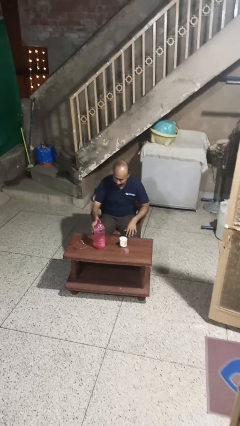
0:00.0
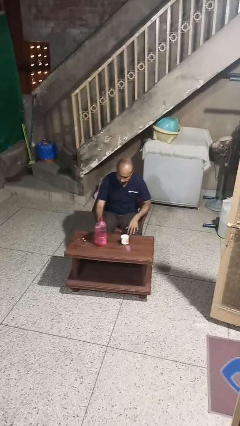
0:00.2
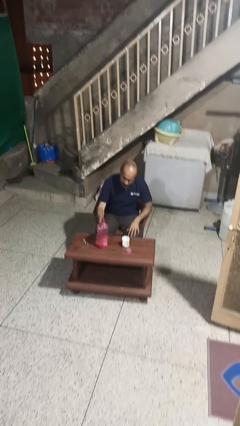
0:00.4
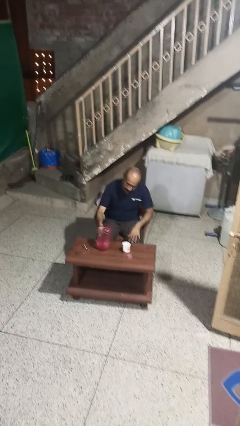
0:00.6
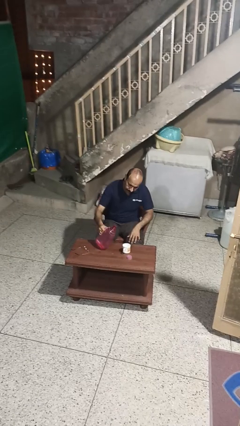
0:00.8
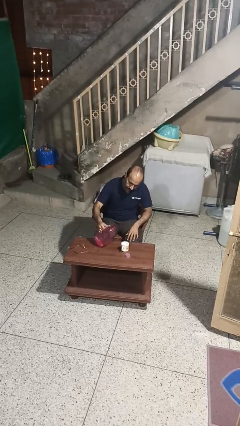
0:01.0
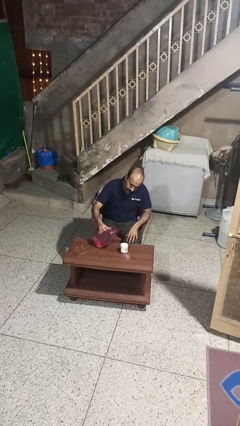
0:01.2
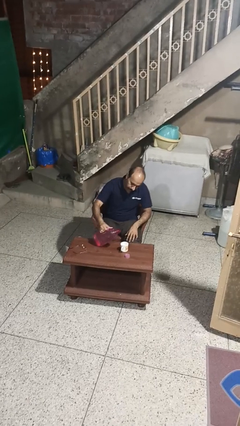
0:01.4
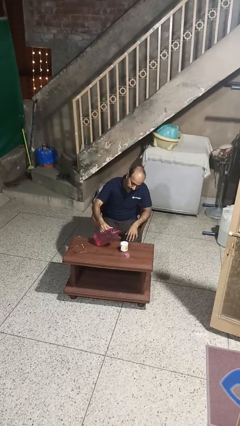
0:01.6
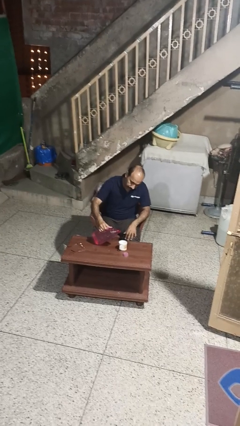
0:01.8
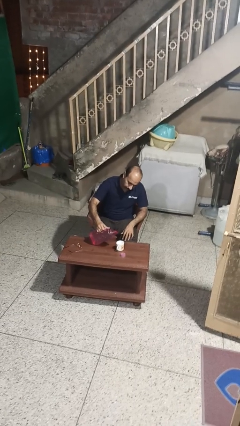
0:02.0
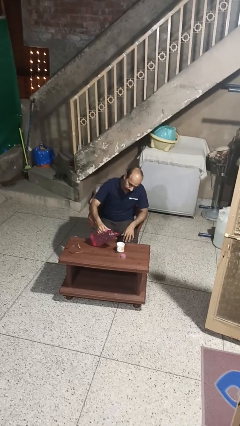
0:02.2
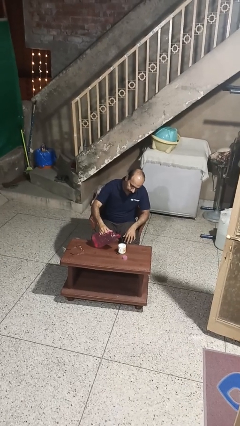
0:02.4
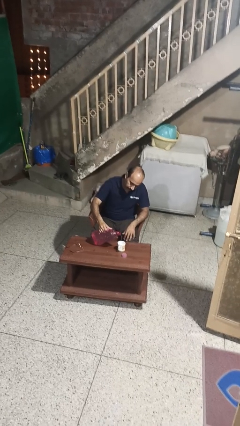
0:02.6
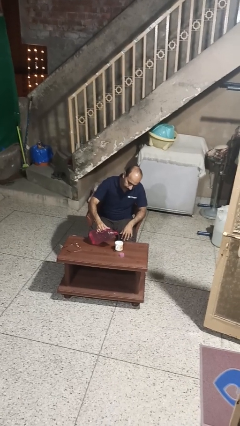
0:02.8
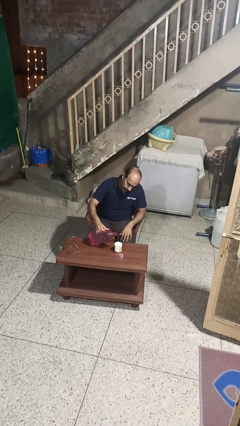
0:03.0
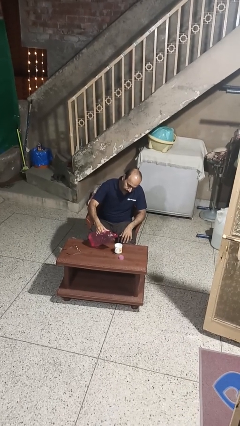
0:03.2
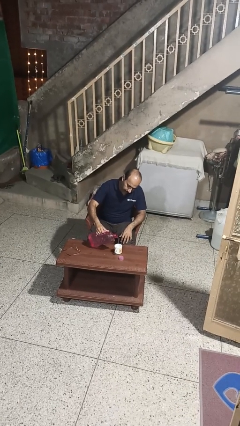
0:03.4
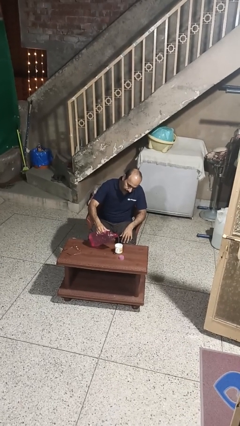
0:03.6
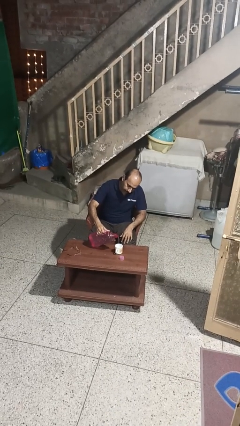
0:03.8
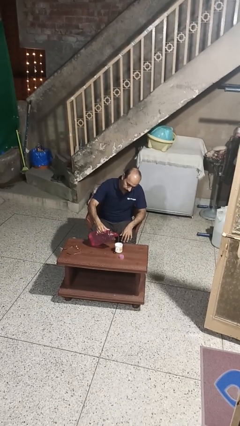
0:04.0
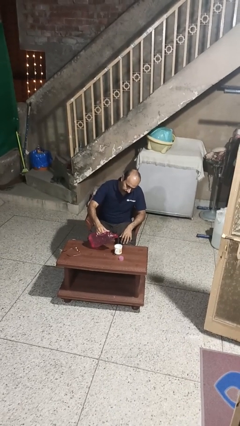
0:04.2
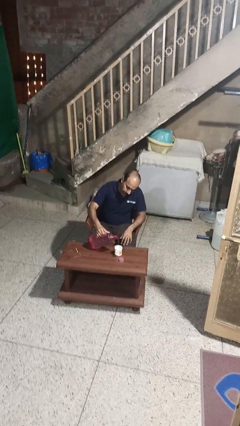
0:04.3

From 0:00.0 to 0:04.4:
person pours liquid into cup

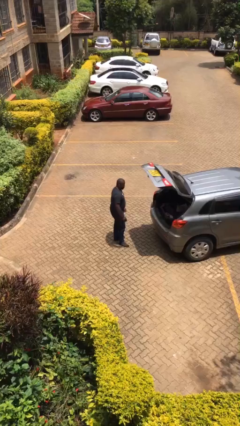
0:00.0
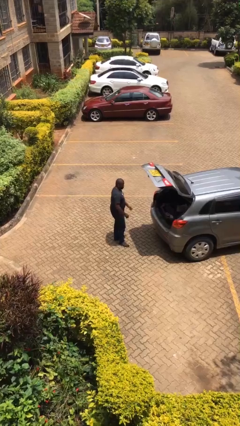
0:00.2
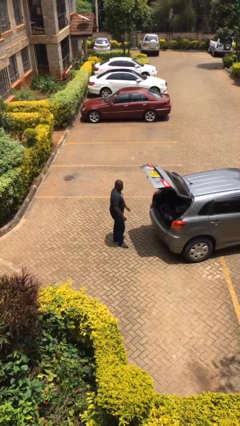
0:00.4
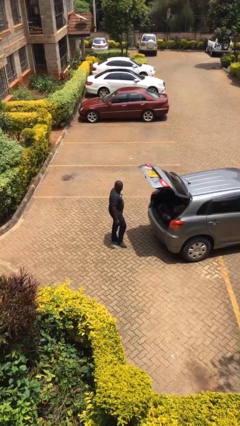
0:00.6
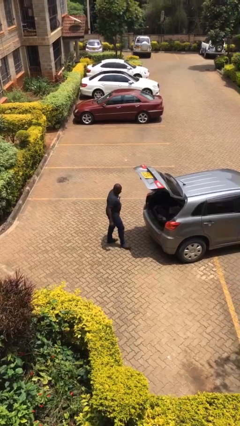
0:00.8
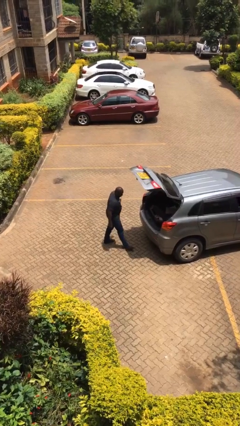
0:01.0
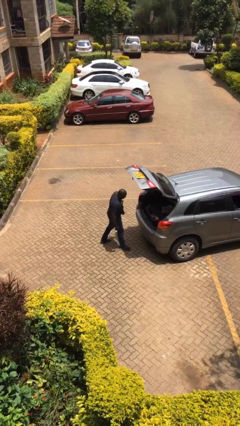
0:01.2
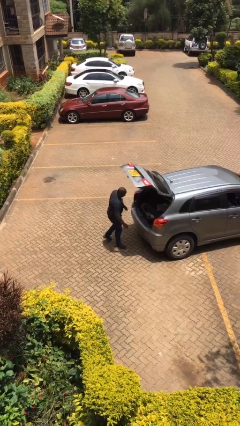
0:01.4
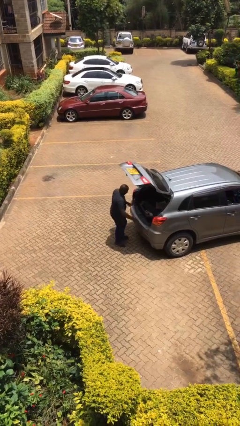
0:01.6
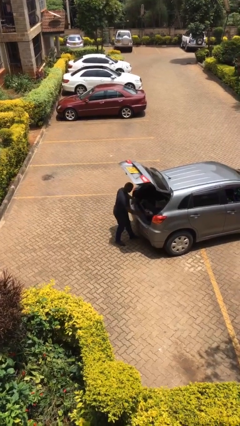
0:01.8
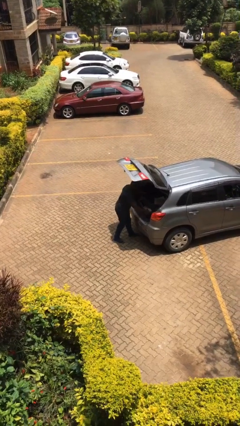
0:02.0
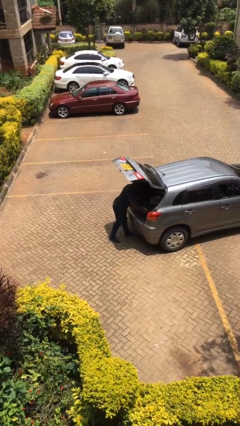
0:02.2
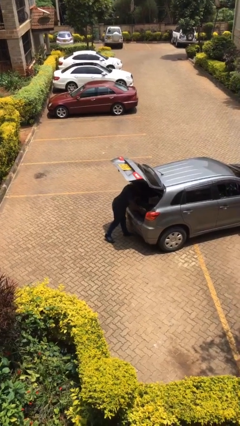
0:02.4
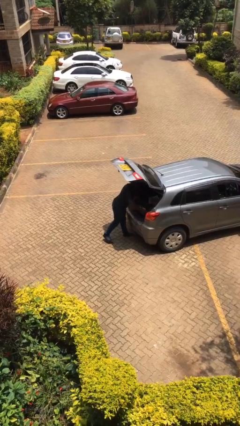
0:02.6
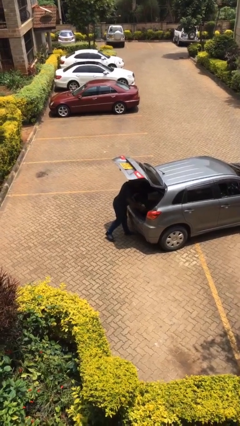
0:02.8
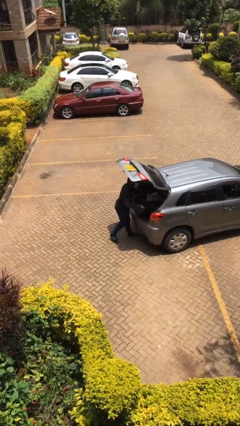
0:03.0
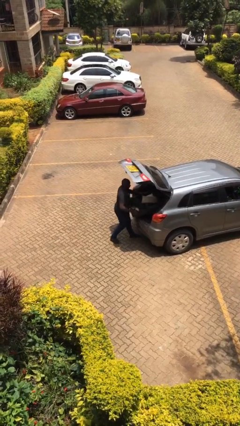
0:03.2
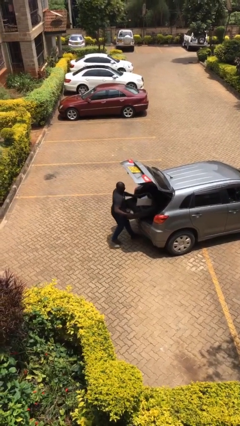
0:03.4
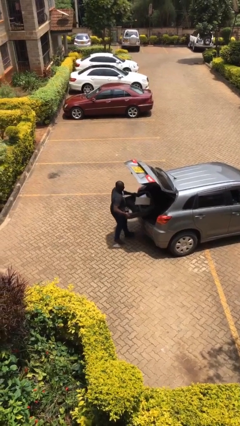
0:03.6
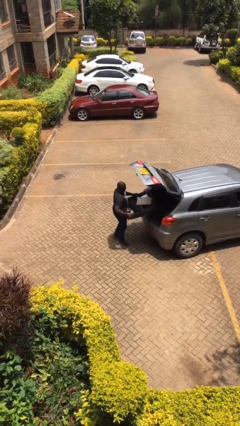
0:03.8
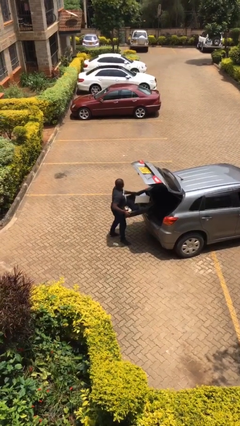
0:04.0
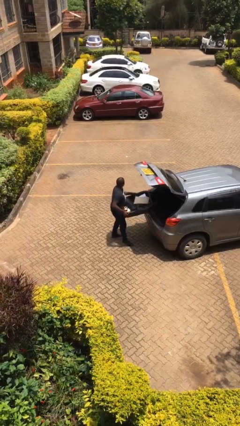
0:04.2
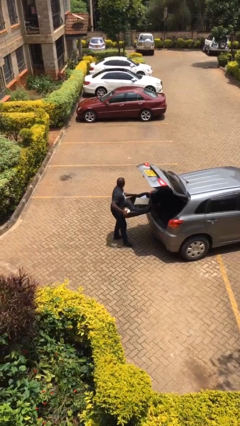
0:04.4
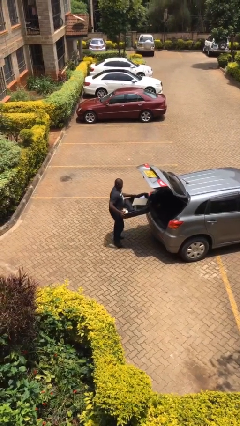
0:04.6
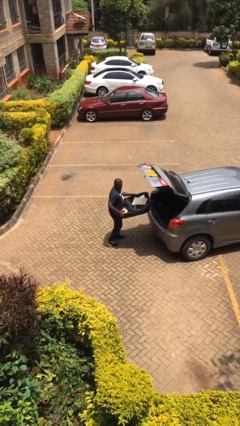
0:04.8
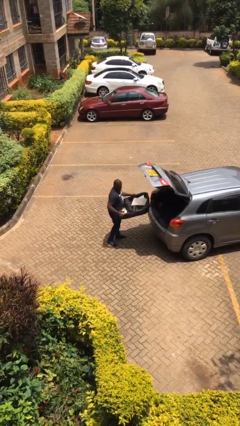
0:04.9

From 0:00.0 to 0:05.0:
person unloads car

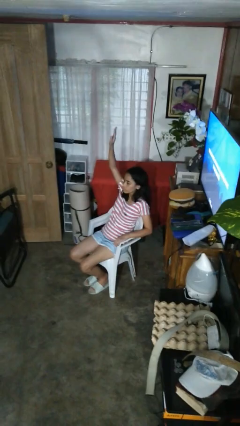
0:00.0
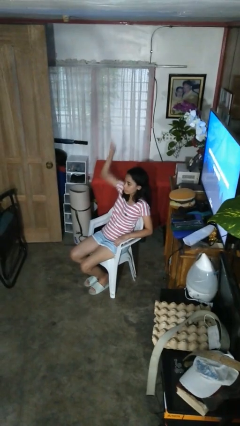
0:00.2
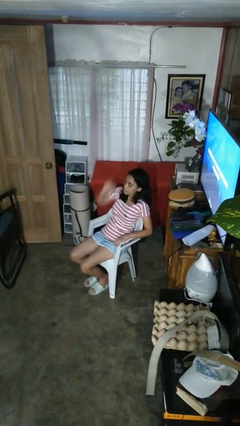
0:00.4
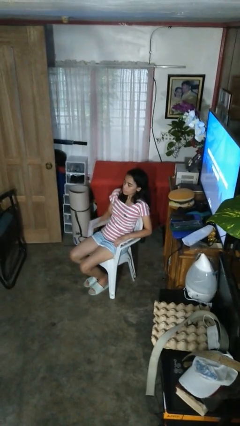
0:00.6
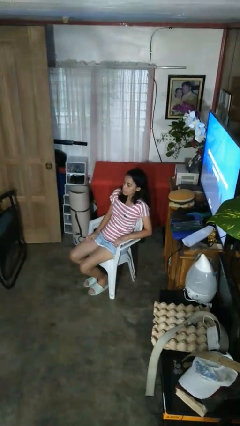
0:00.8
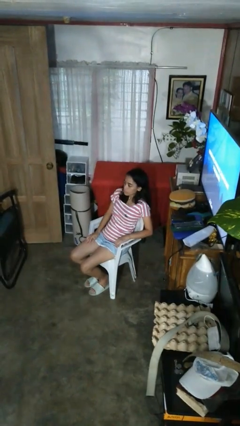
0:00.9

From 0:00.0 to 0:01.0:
person gestures lower hand

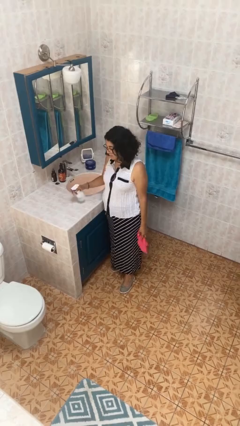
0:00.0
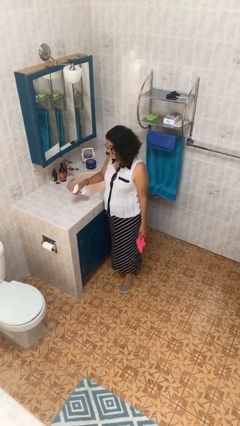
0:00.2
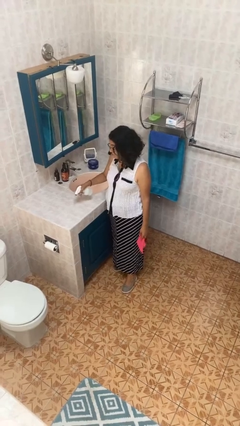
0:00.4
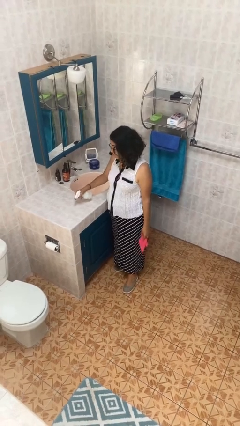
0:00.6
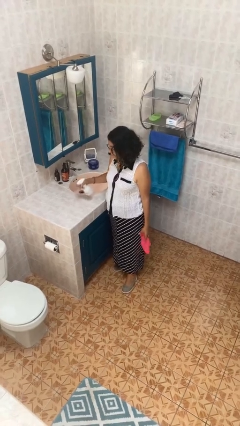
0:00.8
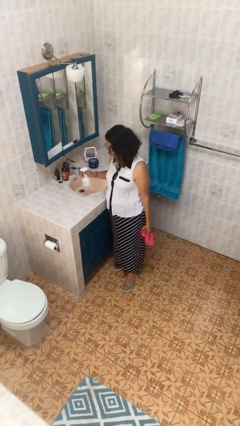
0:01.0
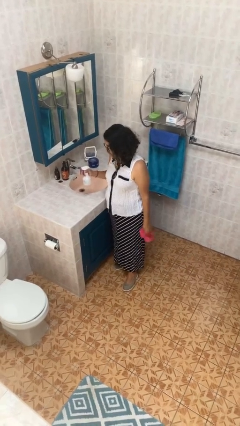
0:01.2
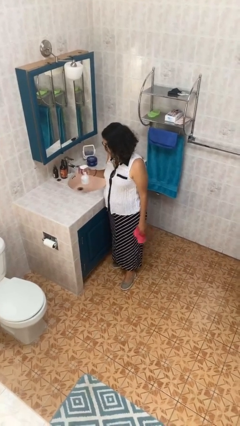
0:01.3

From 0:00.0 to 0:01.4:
person sprays from bottle

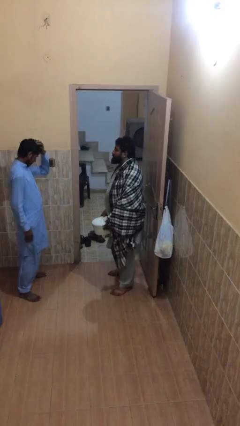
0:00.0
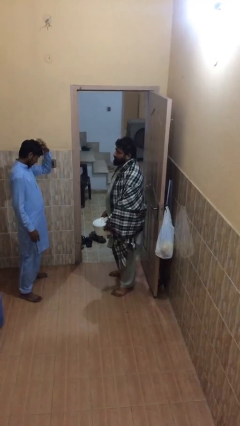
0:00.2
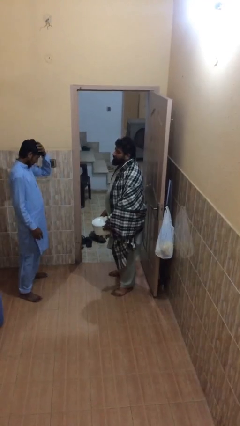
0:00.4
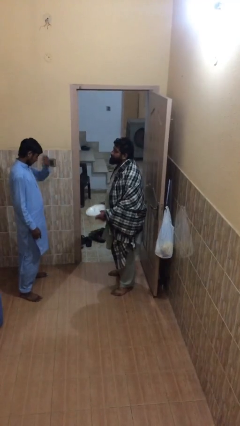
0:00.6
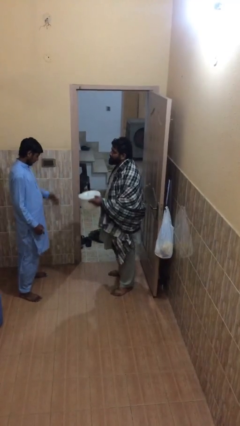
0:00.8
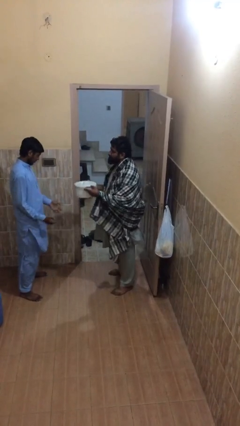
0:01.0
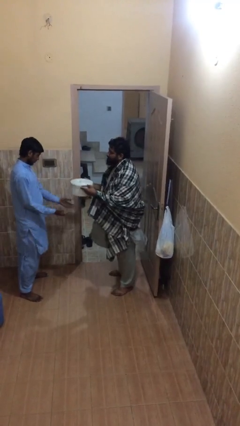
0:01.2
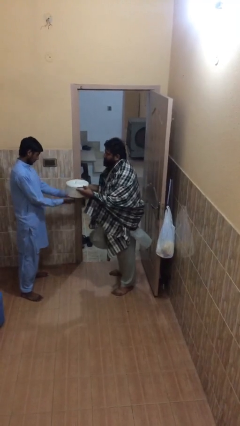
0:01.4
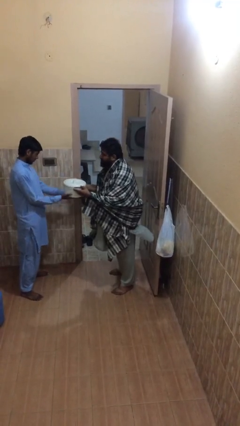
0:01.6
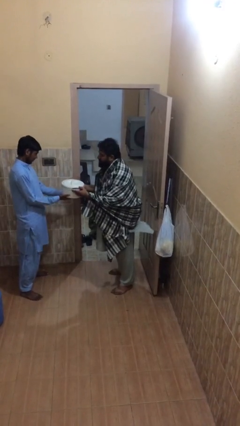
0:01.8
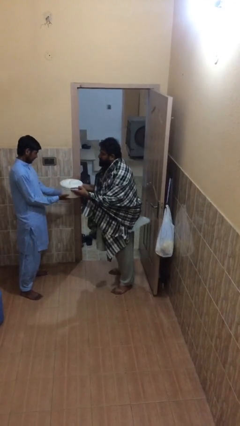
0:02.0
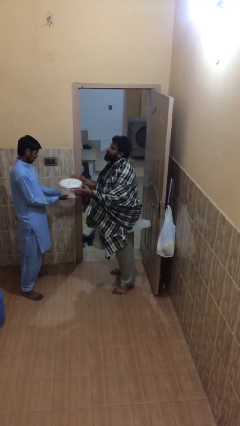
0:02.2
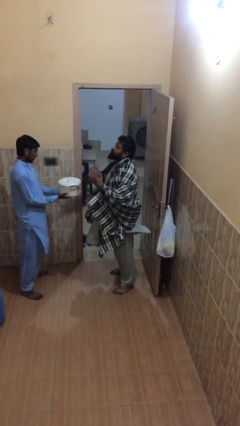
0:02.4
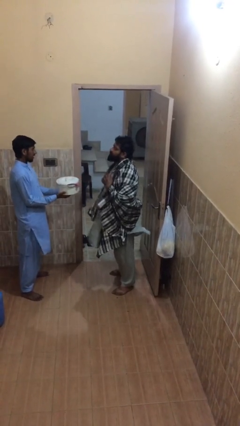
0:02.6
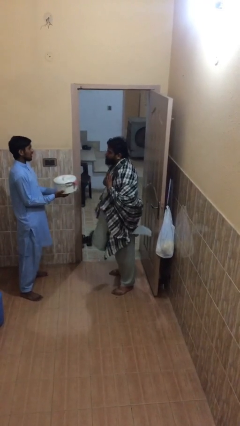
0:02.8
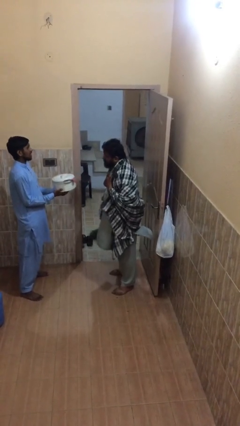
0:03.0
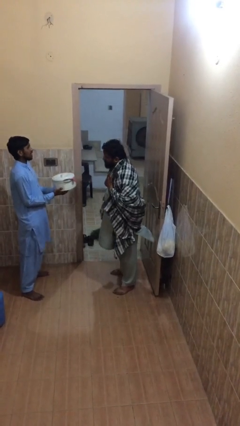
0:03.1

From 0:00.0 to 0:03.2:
person transfers object to person

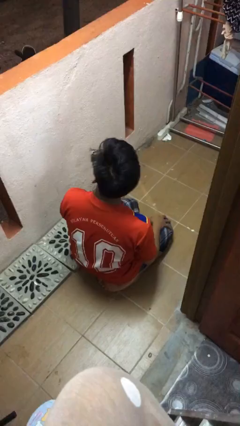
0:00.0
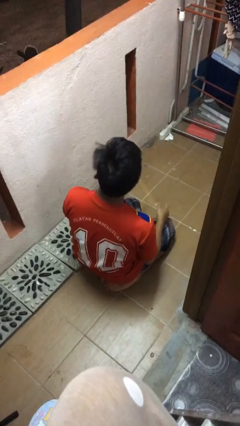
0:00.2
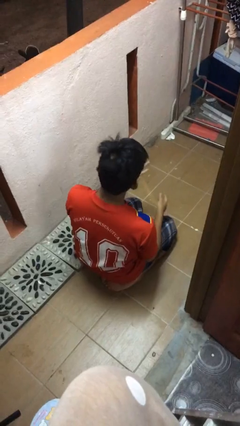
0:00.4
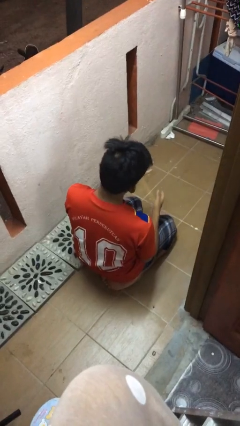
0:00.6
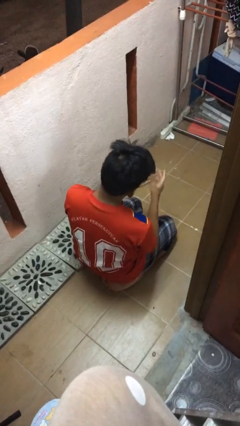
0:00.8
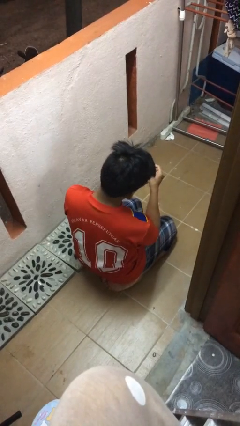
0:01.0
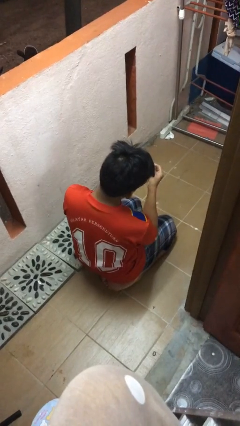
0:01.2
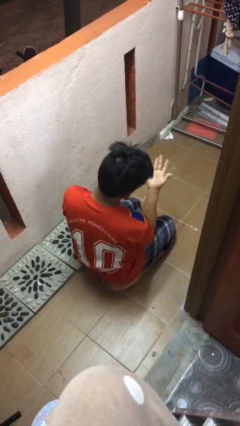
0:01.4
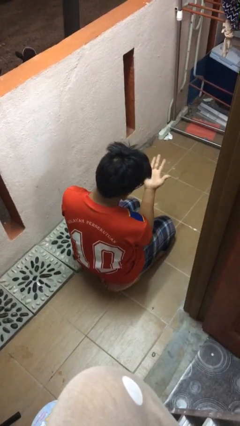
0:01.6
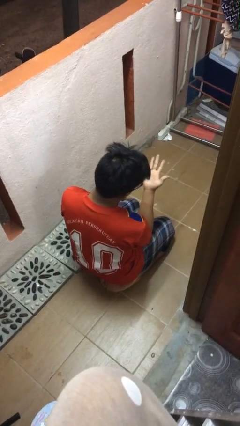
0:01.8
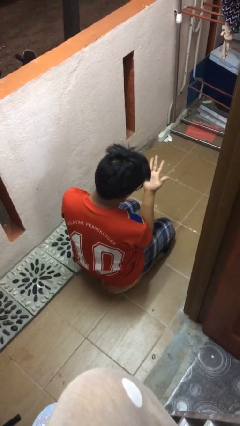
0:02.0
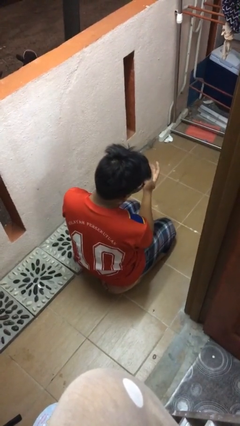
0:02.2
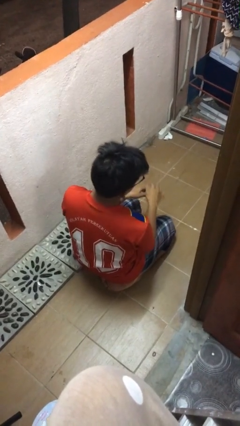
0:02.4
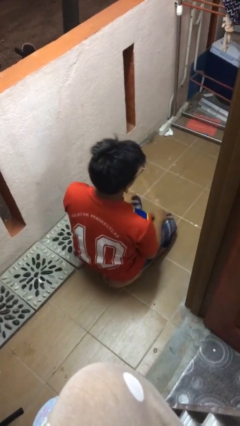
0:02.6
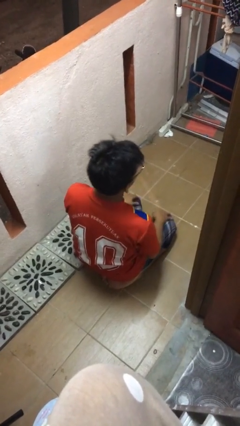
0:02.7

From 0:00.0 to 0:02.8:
person looks at hands in lap
